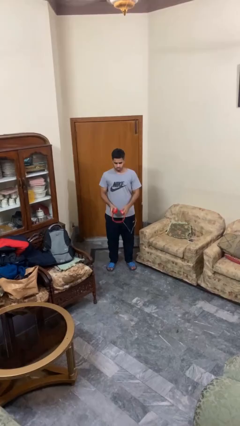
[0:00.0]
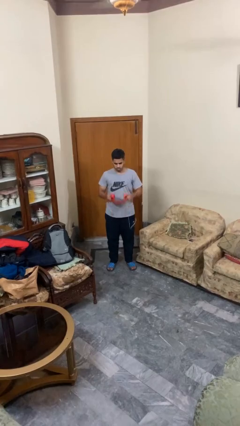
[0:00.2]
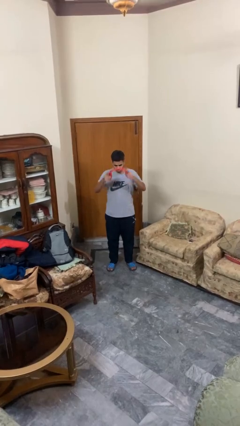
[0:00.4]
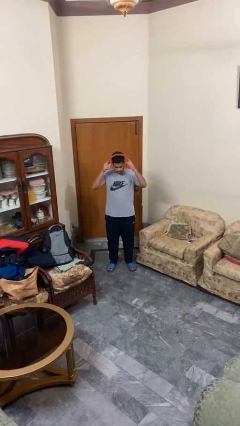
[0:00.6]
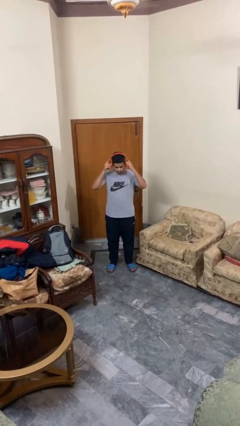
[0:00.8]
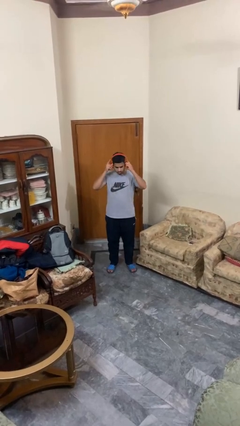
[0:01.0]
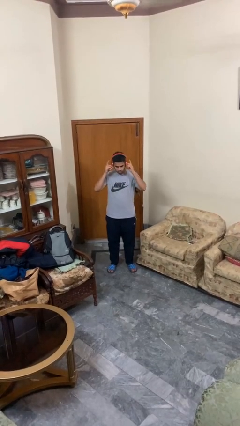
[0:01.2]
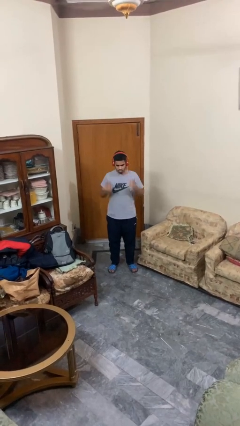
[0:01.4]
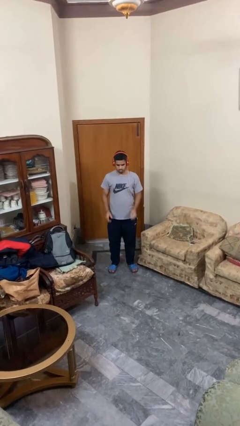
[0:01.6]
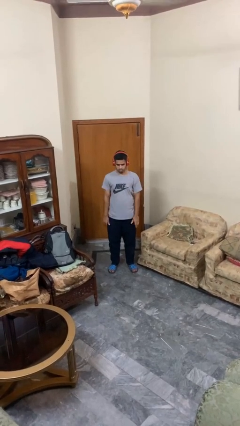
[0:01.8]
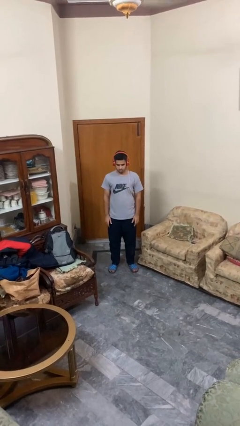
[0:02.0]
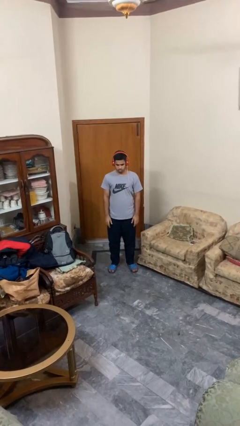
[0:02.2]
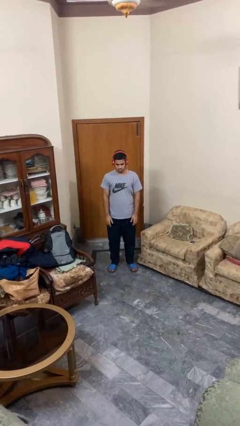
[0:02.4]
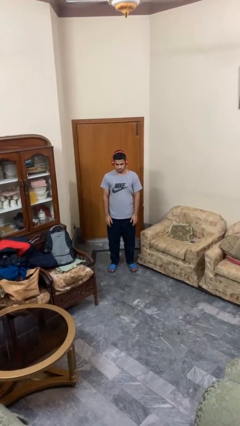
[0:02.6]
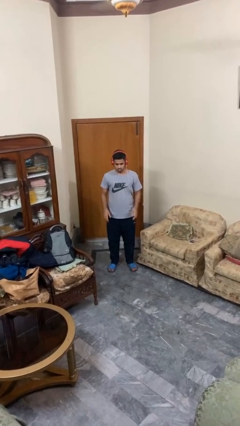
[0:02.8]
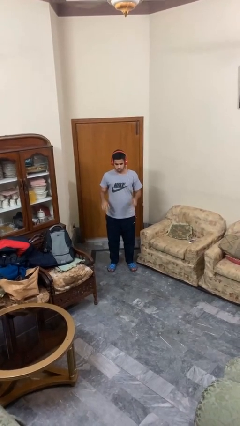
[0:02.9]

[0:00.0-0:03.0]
person puts on headphones

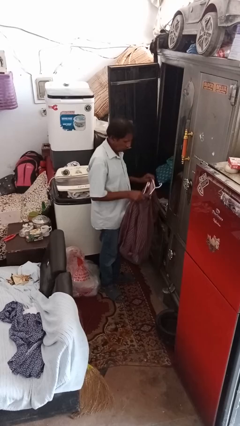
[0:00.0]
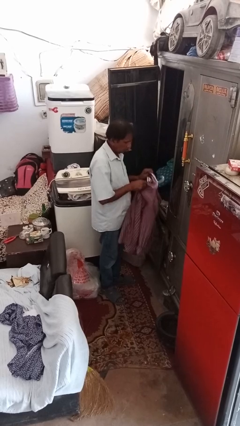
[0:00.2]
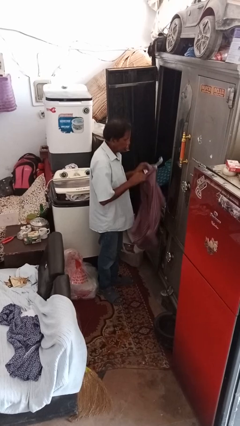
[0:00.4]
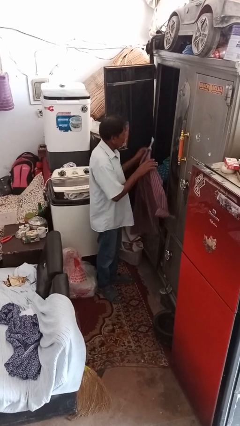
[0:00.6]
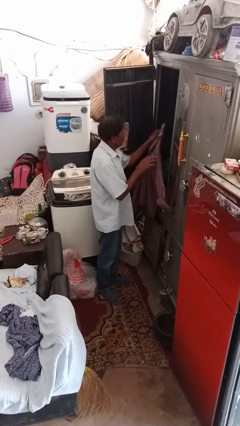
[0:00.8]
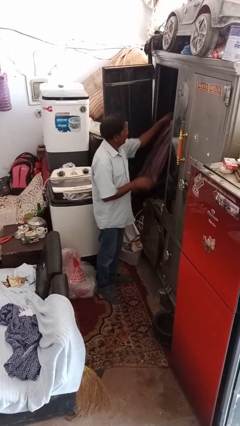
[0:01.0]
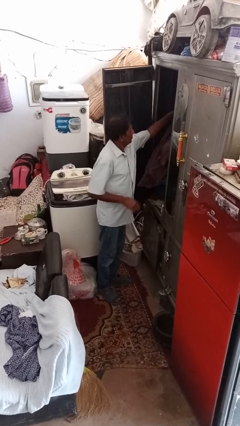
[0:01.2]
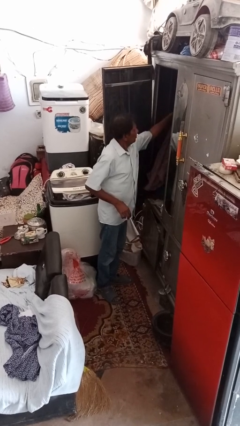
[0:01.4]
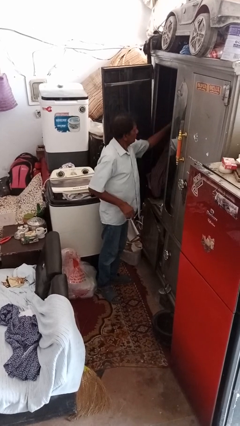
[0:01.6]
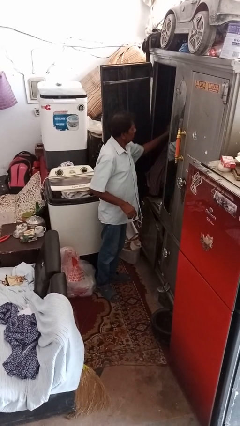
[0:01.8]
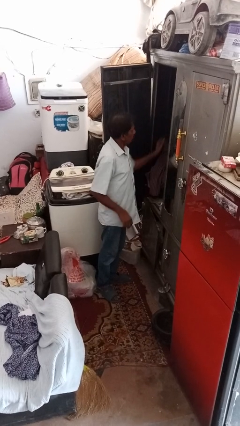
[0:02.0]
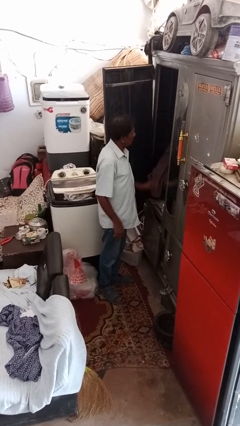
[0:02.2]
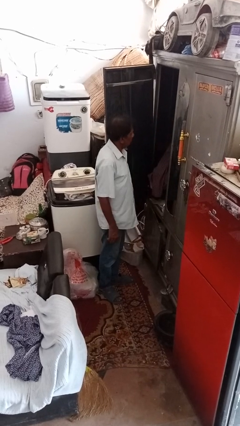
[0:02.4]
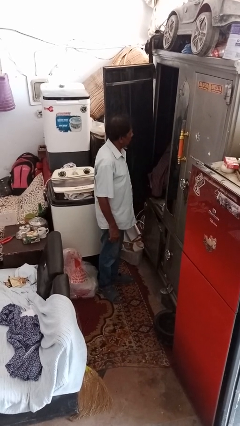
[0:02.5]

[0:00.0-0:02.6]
person puts clothes into closet

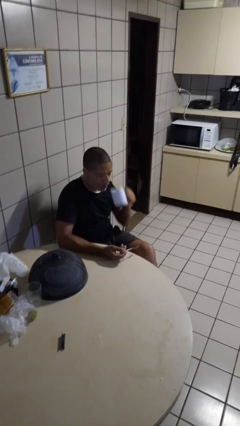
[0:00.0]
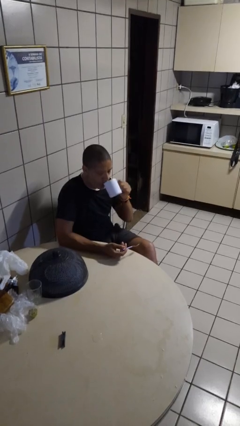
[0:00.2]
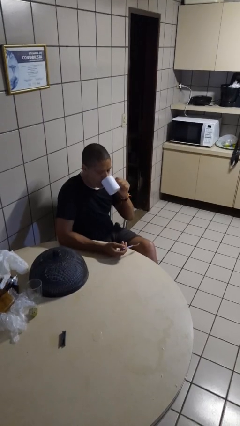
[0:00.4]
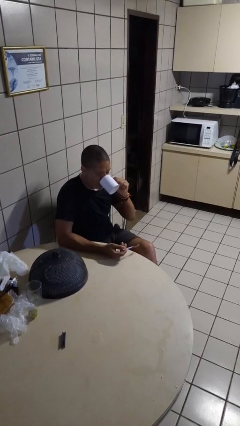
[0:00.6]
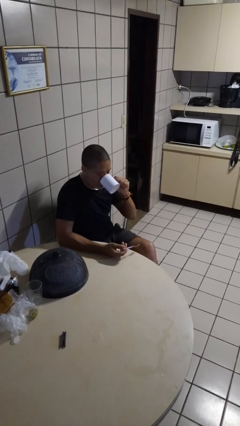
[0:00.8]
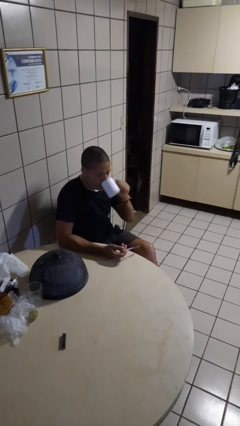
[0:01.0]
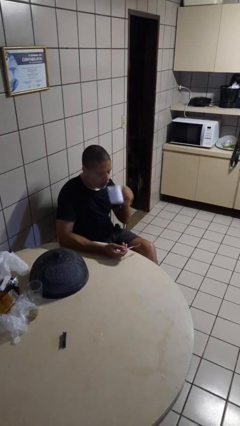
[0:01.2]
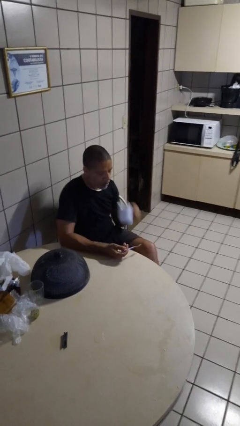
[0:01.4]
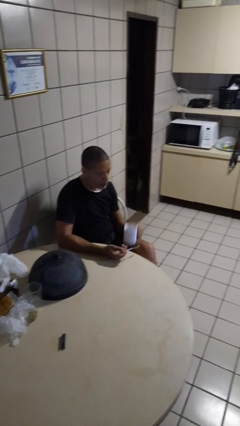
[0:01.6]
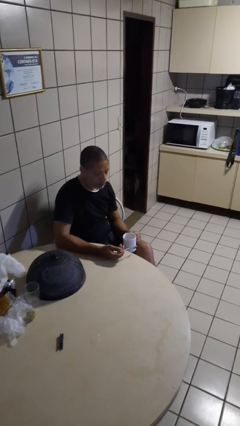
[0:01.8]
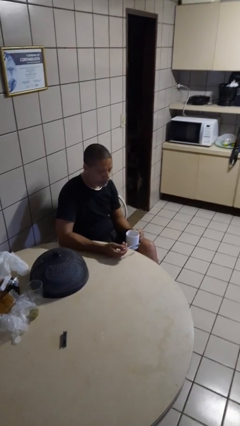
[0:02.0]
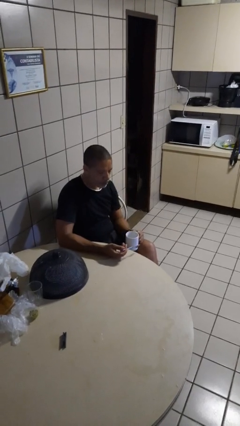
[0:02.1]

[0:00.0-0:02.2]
person drinks from mug

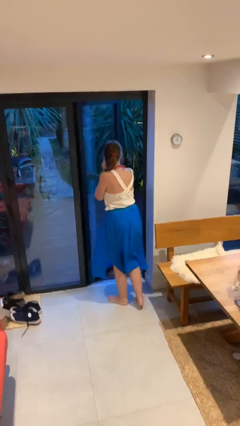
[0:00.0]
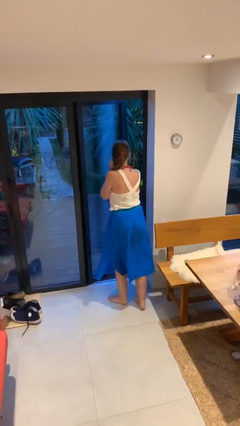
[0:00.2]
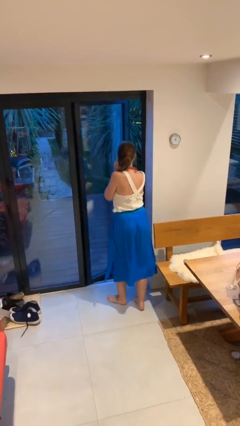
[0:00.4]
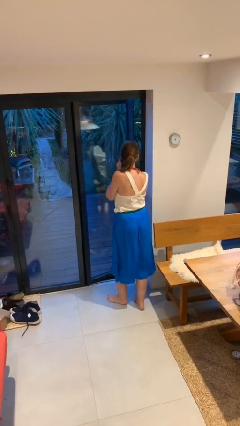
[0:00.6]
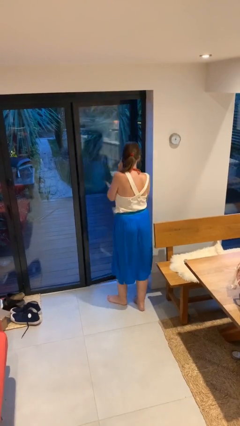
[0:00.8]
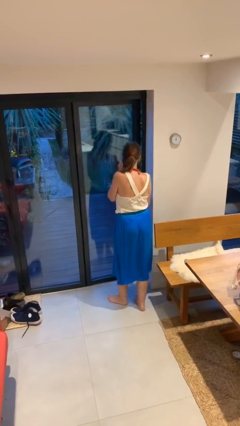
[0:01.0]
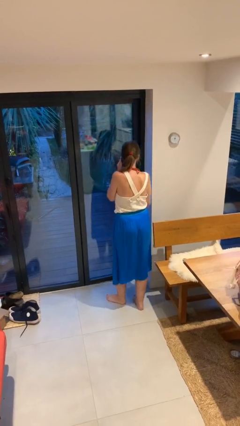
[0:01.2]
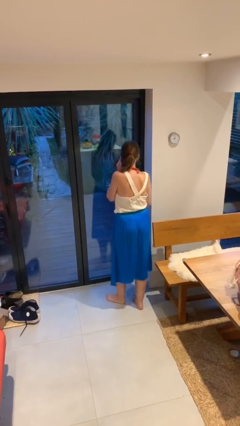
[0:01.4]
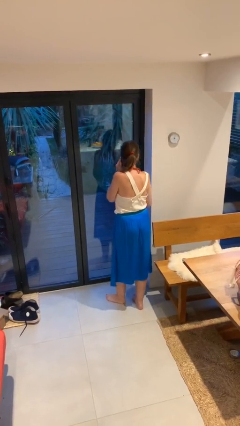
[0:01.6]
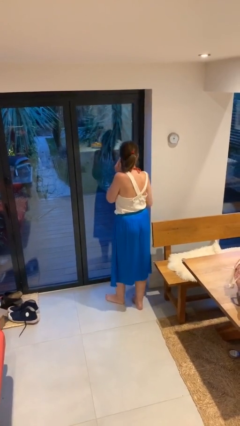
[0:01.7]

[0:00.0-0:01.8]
person closes facility door

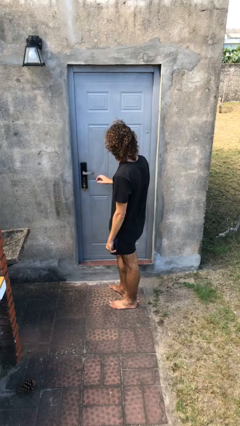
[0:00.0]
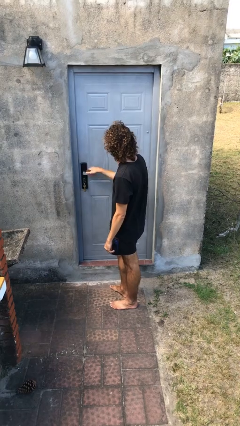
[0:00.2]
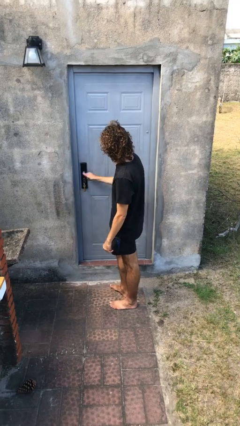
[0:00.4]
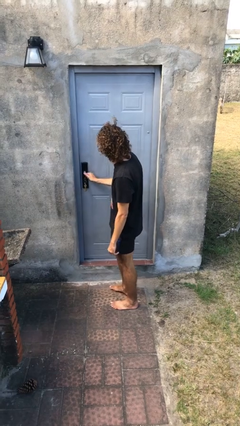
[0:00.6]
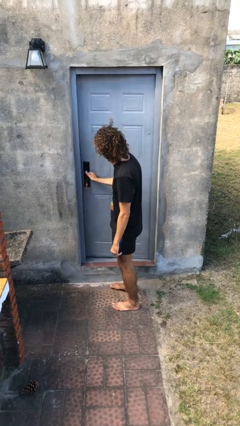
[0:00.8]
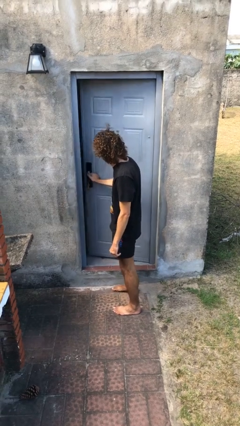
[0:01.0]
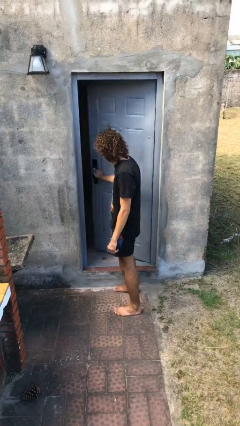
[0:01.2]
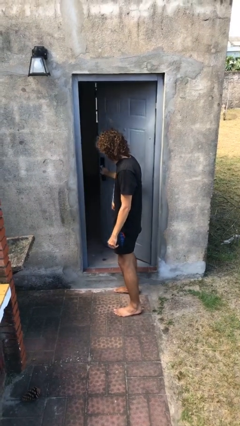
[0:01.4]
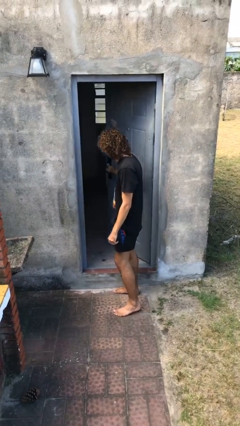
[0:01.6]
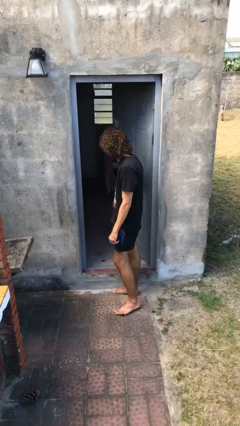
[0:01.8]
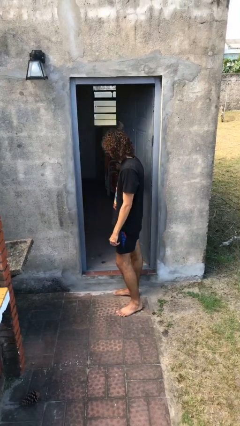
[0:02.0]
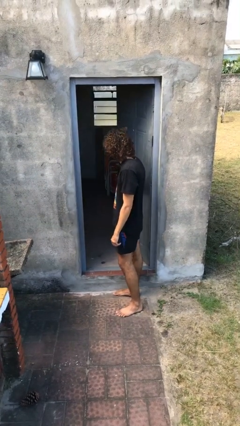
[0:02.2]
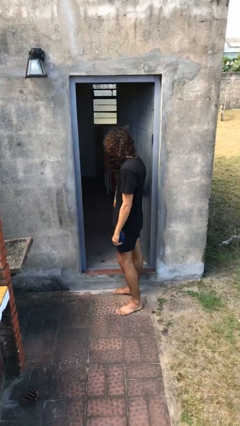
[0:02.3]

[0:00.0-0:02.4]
person opens facility door

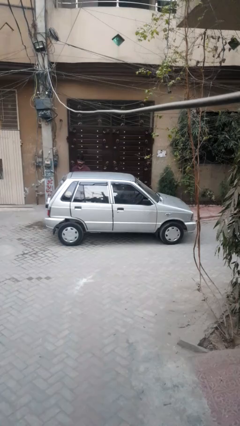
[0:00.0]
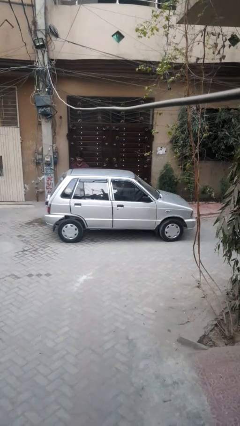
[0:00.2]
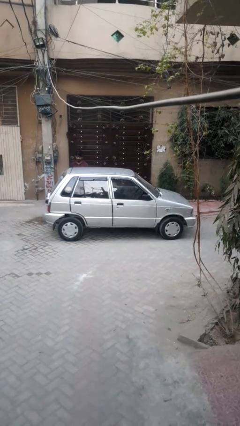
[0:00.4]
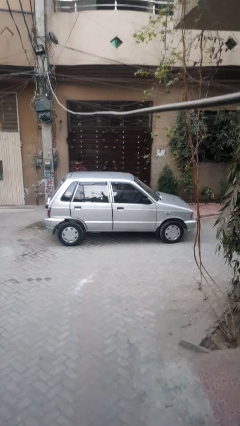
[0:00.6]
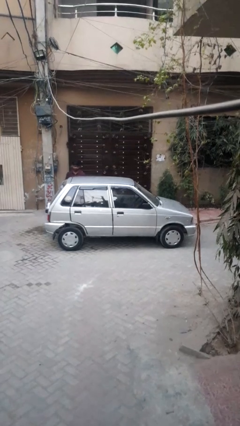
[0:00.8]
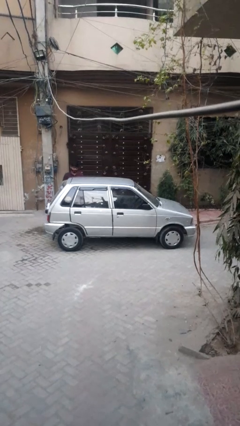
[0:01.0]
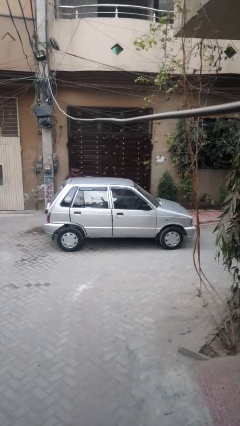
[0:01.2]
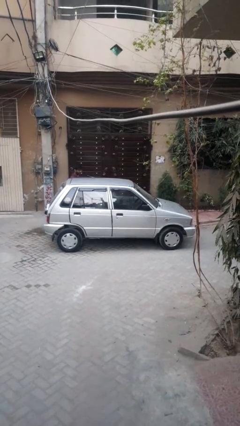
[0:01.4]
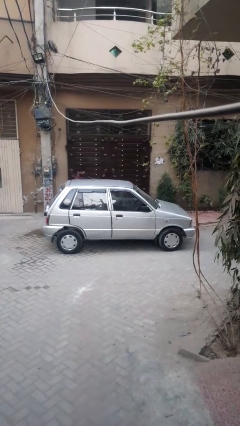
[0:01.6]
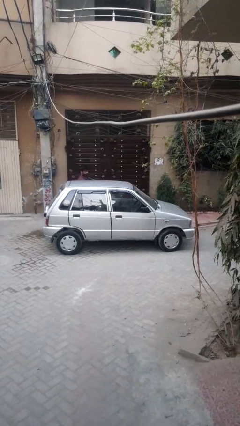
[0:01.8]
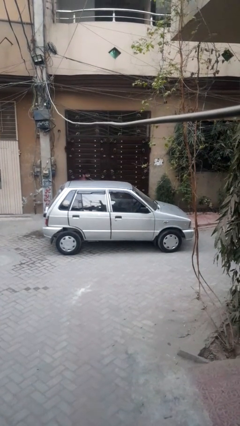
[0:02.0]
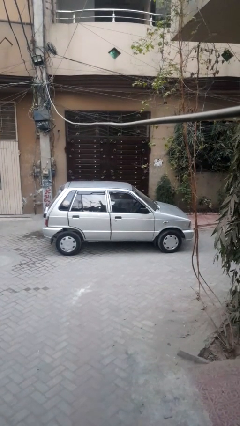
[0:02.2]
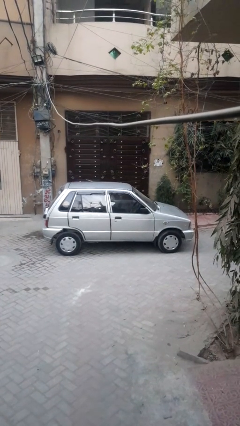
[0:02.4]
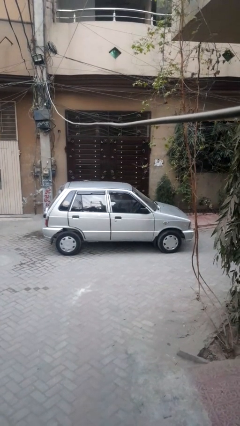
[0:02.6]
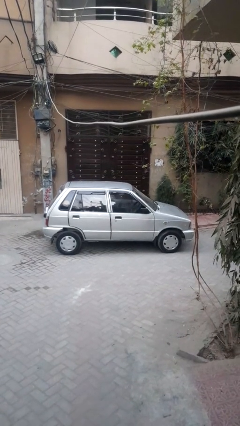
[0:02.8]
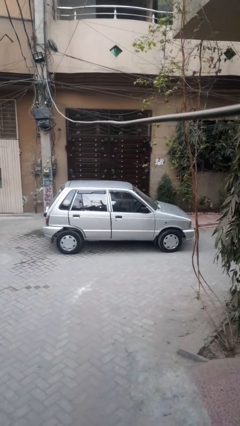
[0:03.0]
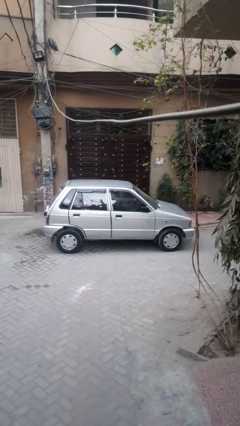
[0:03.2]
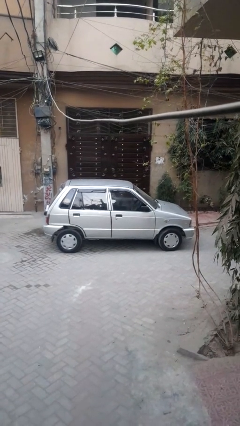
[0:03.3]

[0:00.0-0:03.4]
car picks up person

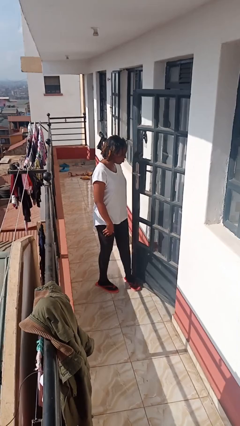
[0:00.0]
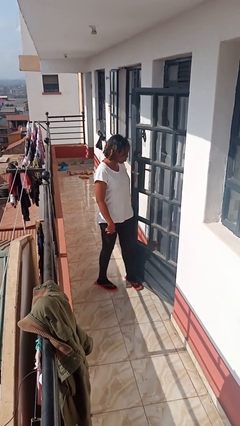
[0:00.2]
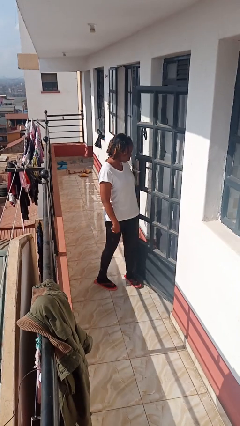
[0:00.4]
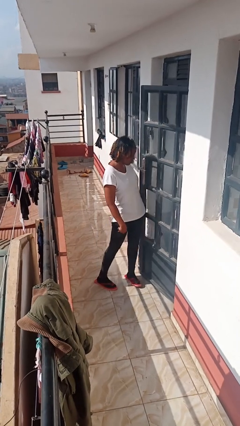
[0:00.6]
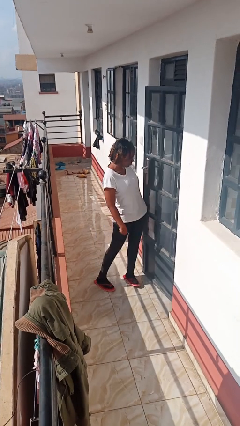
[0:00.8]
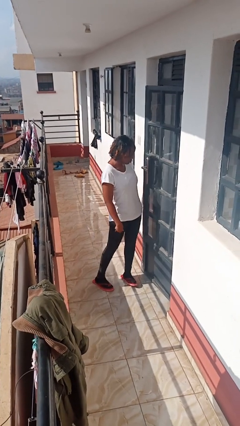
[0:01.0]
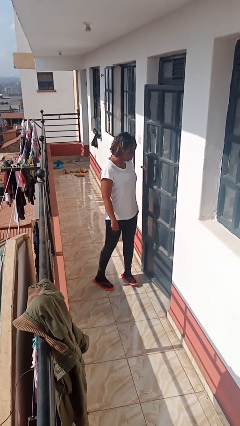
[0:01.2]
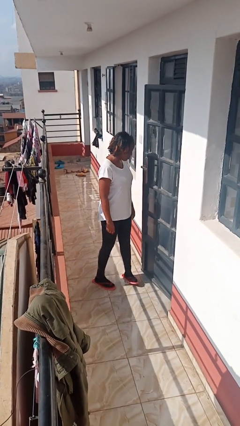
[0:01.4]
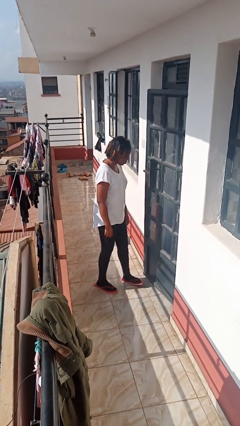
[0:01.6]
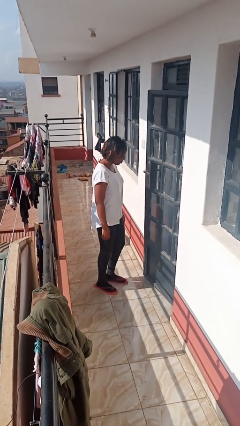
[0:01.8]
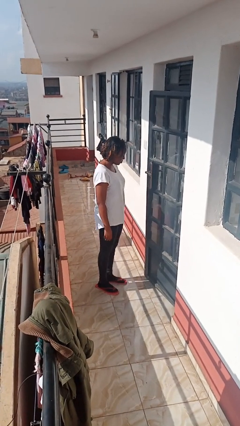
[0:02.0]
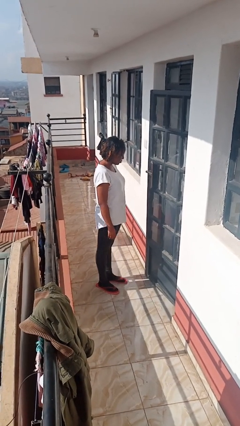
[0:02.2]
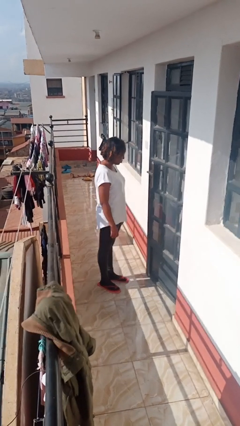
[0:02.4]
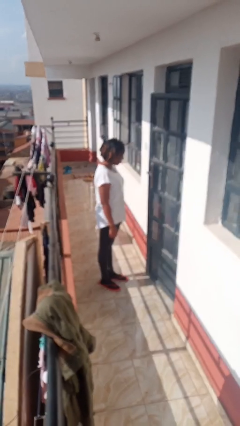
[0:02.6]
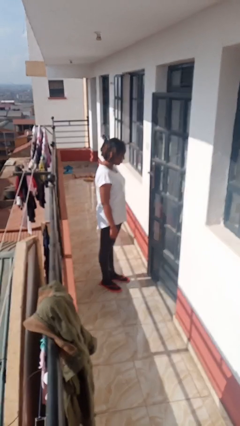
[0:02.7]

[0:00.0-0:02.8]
person closes door with hip
